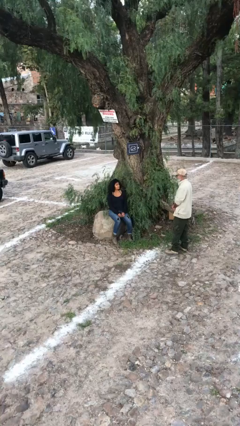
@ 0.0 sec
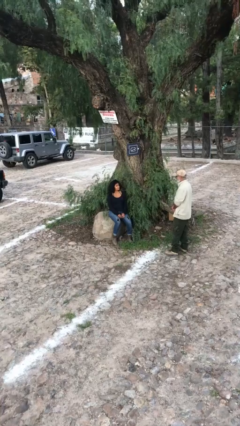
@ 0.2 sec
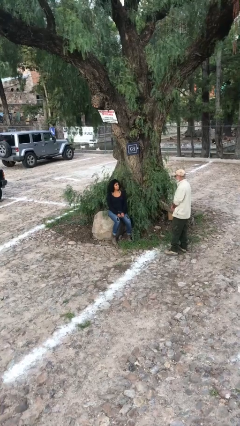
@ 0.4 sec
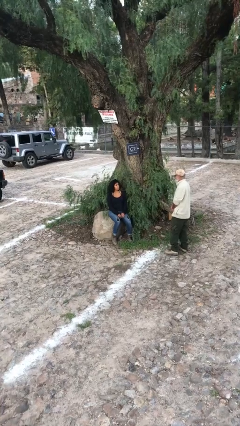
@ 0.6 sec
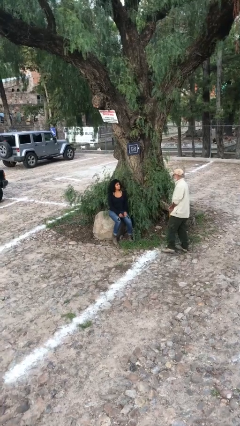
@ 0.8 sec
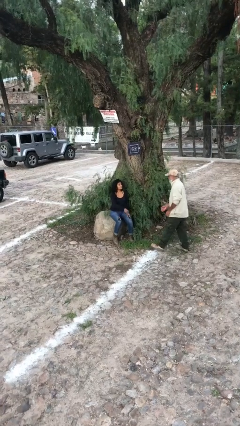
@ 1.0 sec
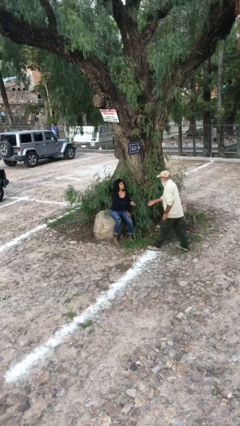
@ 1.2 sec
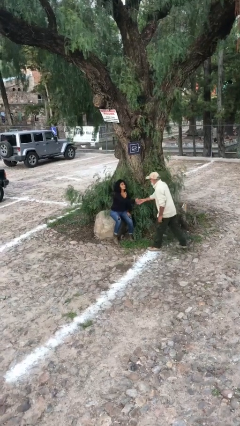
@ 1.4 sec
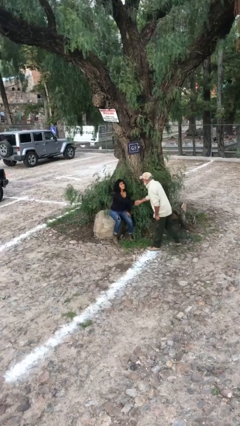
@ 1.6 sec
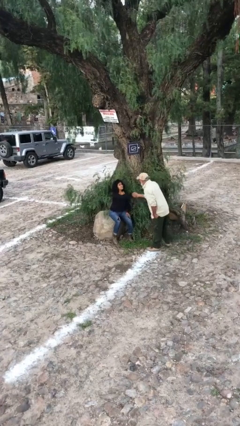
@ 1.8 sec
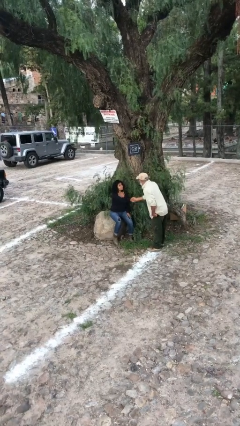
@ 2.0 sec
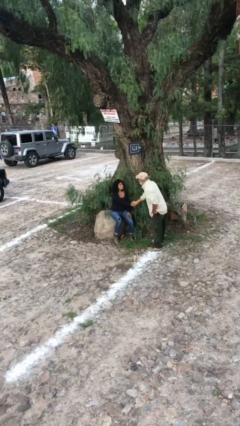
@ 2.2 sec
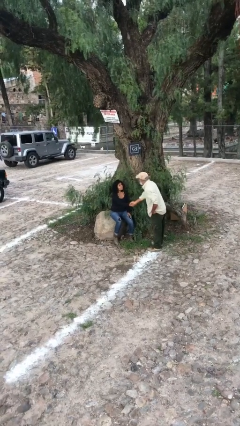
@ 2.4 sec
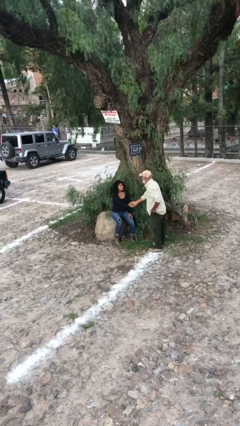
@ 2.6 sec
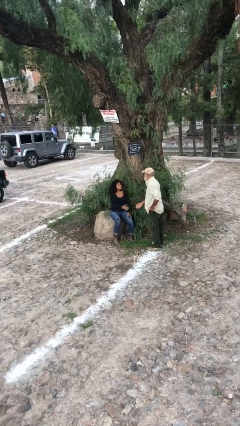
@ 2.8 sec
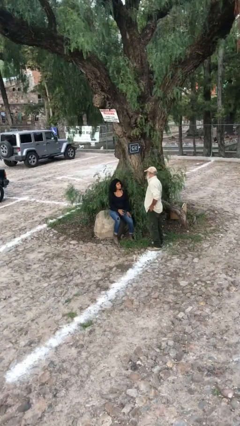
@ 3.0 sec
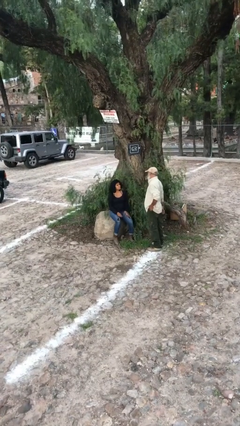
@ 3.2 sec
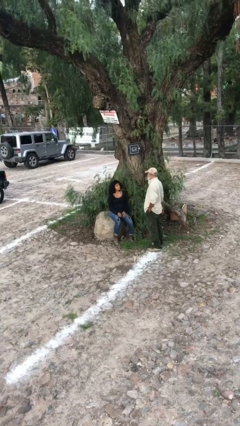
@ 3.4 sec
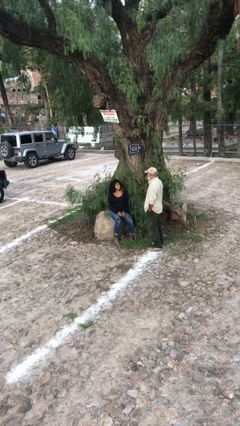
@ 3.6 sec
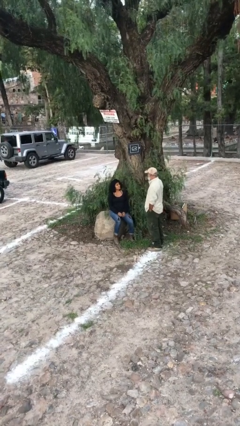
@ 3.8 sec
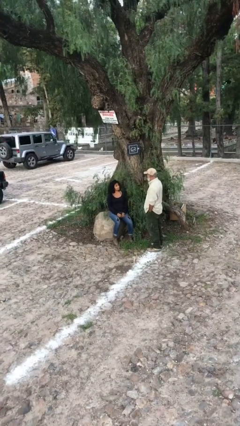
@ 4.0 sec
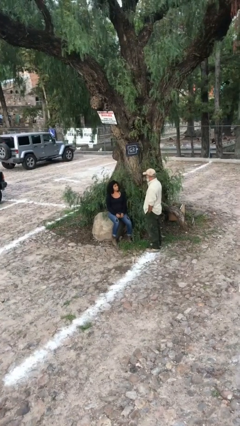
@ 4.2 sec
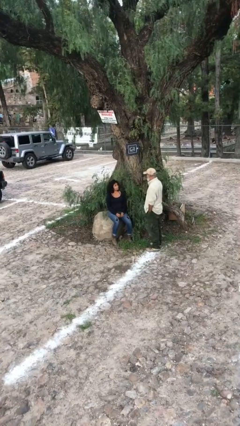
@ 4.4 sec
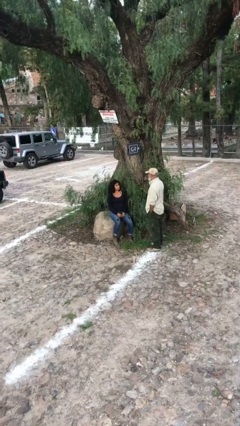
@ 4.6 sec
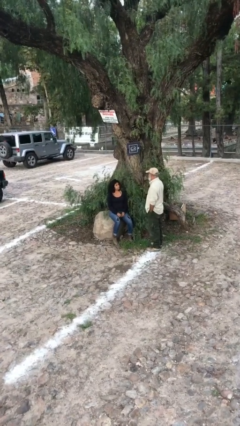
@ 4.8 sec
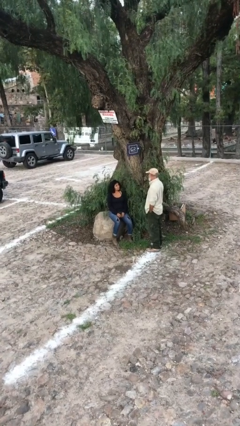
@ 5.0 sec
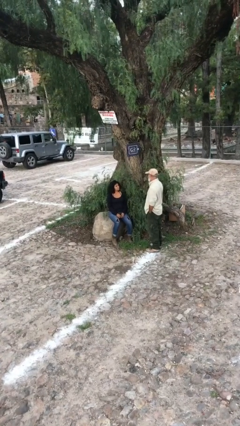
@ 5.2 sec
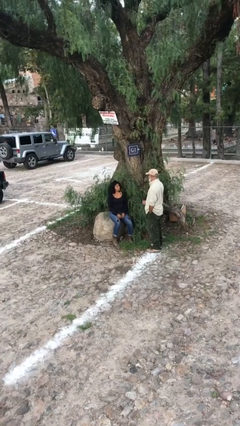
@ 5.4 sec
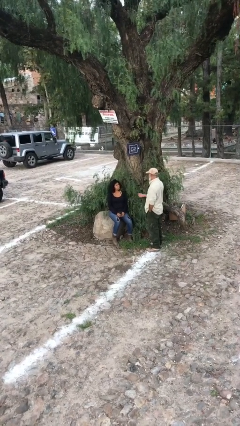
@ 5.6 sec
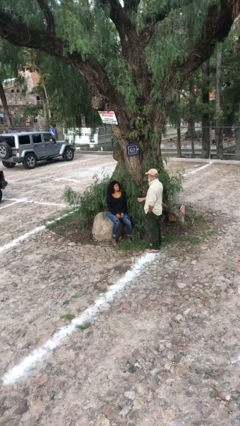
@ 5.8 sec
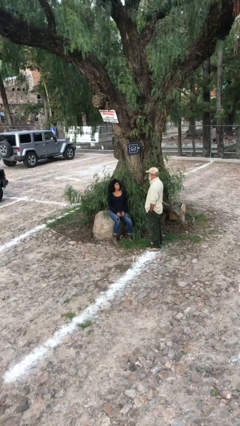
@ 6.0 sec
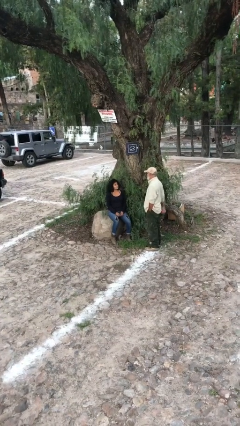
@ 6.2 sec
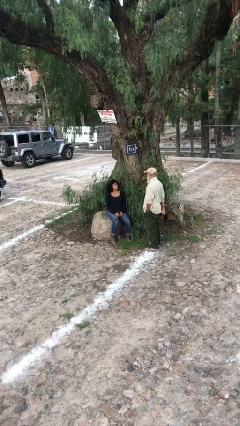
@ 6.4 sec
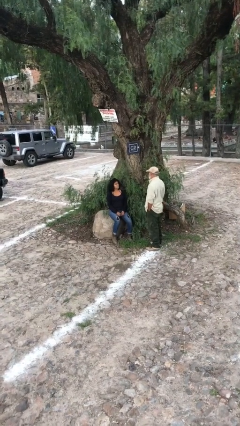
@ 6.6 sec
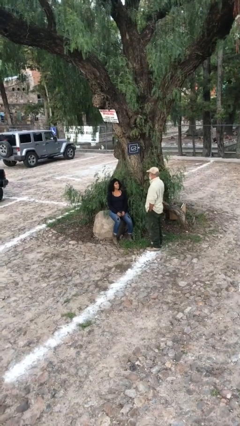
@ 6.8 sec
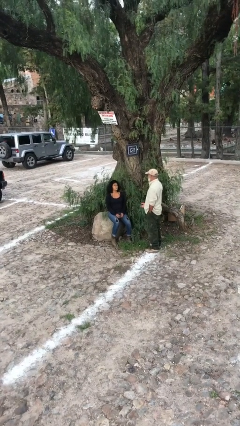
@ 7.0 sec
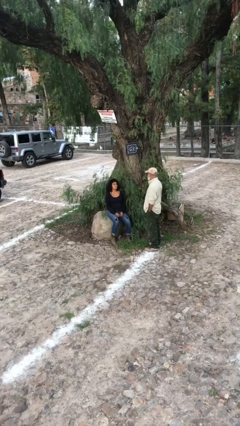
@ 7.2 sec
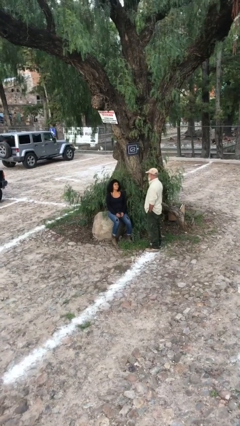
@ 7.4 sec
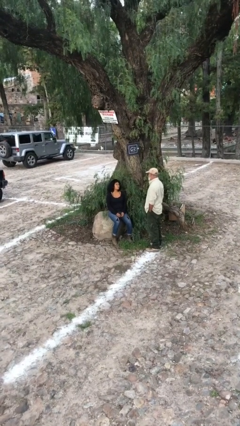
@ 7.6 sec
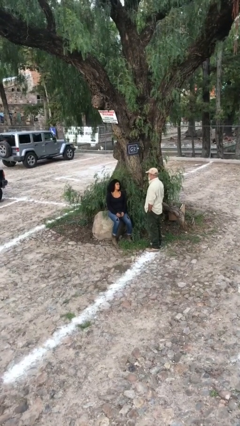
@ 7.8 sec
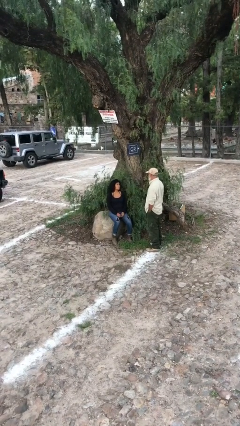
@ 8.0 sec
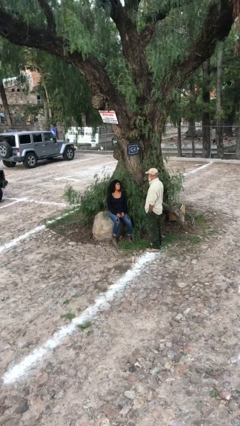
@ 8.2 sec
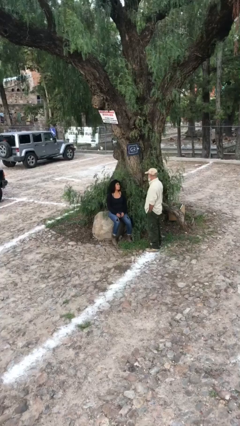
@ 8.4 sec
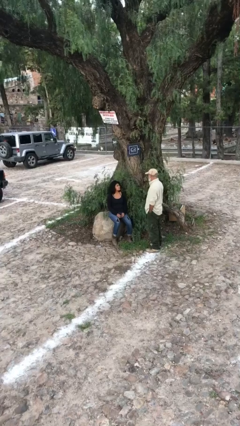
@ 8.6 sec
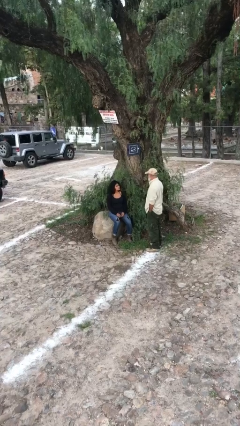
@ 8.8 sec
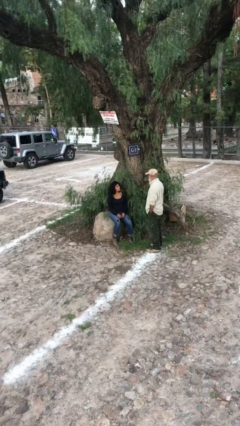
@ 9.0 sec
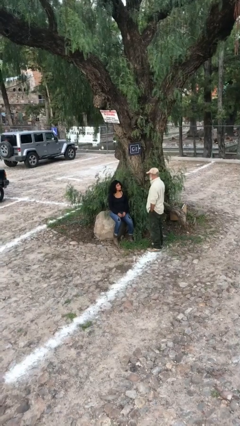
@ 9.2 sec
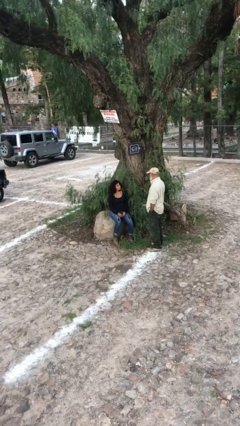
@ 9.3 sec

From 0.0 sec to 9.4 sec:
person shakes hand

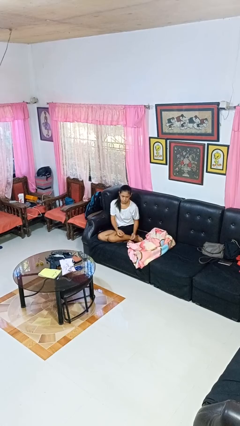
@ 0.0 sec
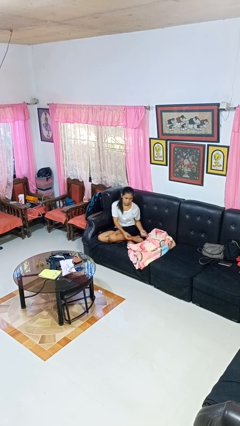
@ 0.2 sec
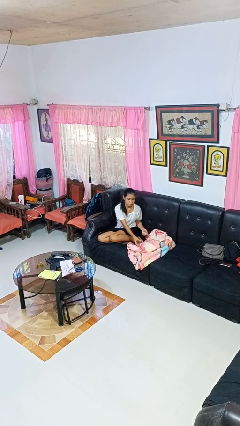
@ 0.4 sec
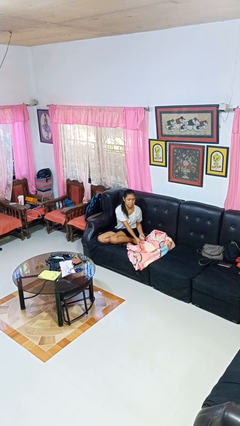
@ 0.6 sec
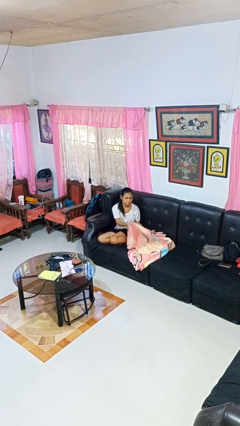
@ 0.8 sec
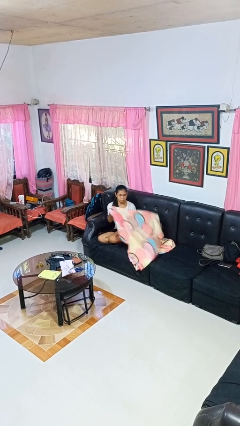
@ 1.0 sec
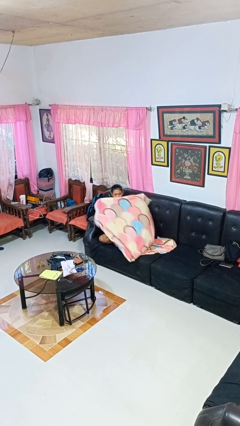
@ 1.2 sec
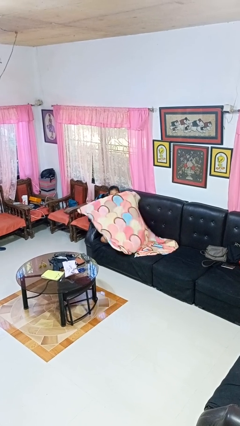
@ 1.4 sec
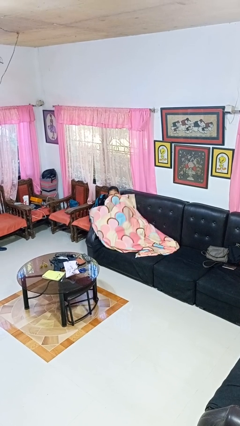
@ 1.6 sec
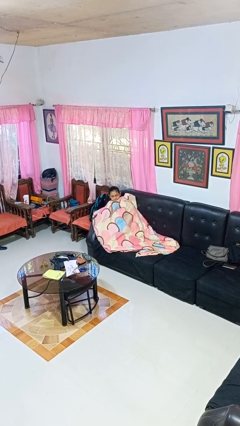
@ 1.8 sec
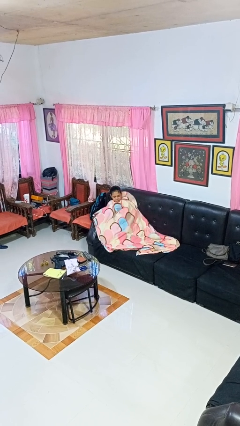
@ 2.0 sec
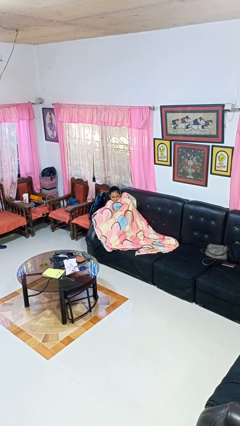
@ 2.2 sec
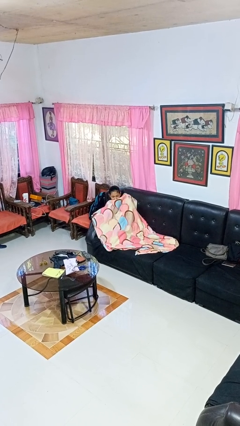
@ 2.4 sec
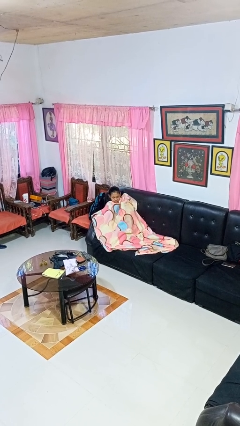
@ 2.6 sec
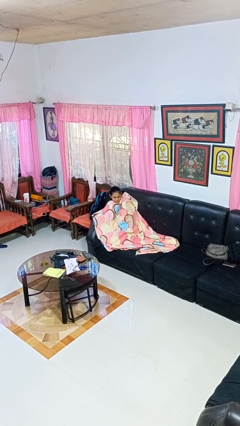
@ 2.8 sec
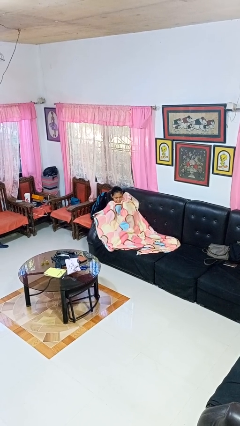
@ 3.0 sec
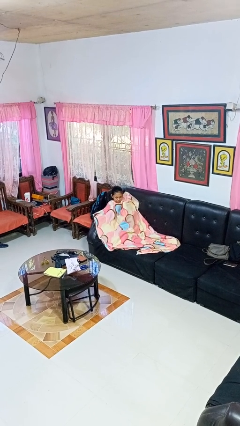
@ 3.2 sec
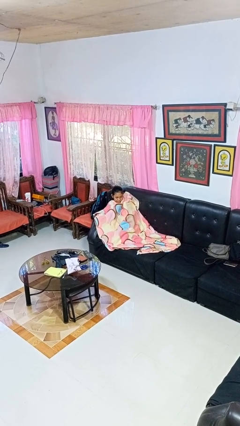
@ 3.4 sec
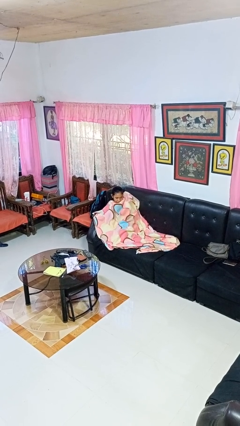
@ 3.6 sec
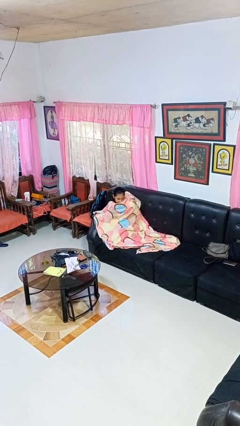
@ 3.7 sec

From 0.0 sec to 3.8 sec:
person covers with blanket

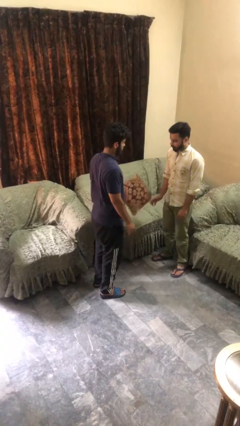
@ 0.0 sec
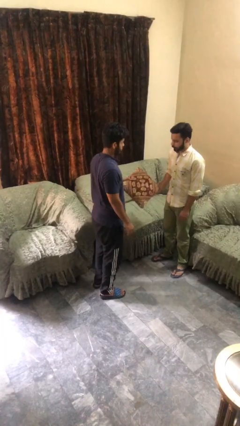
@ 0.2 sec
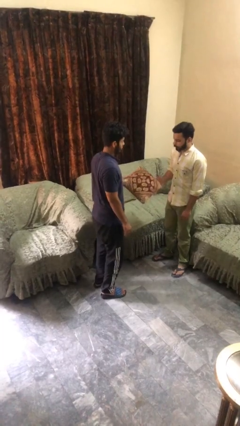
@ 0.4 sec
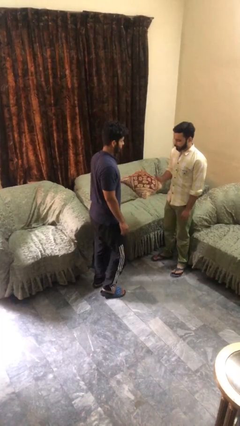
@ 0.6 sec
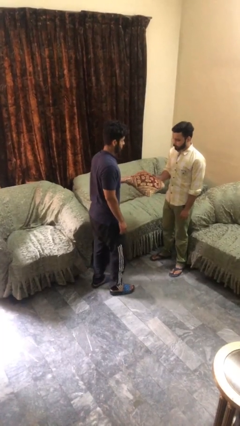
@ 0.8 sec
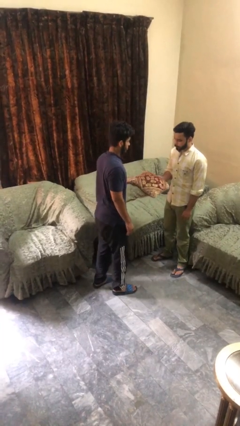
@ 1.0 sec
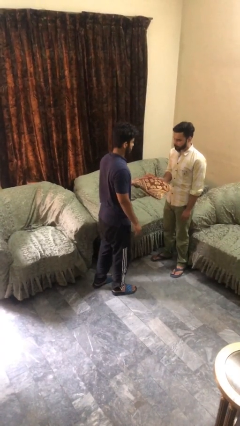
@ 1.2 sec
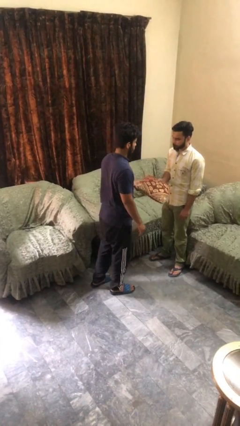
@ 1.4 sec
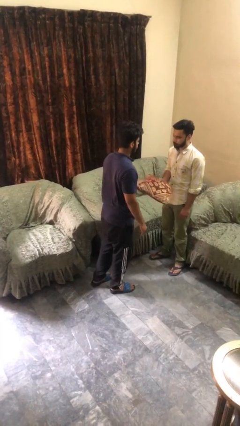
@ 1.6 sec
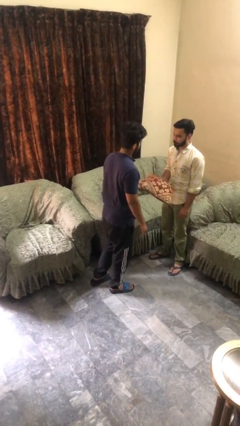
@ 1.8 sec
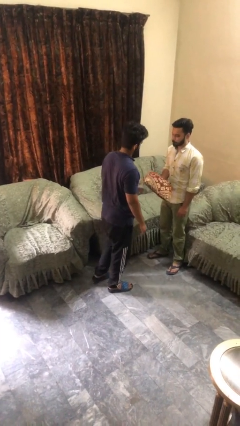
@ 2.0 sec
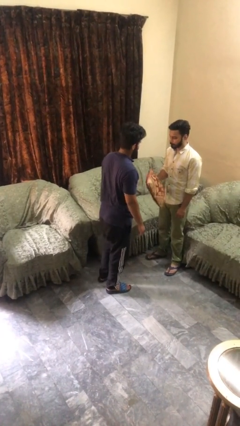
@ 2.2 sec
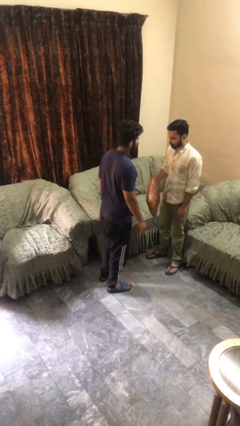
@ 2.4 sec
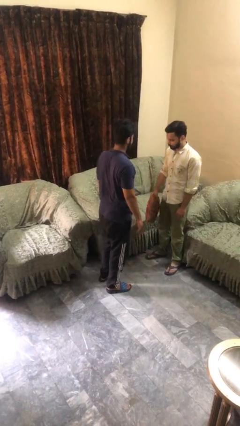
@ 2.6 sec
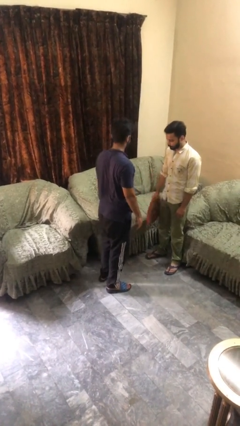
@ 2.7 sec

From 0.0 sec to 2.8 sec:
person transfers object to person

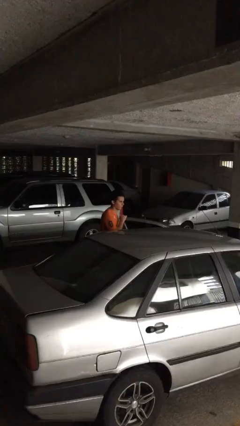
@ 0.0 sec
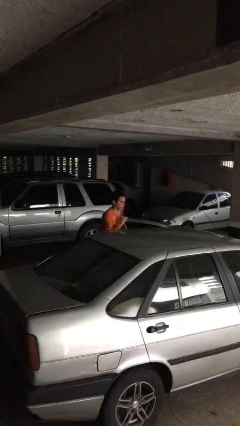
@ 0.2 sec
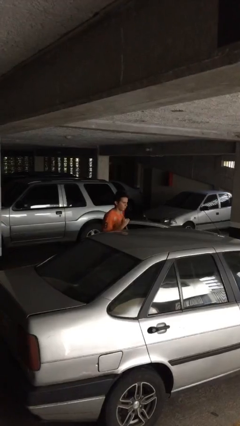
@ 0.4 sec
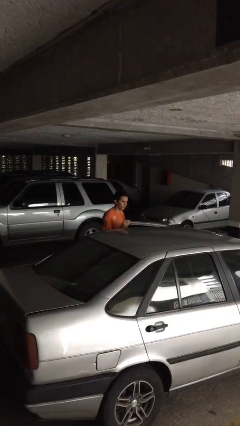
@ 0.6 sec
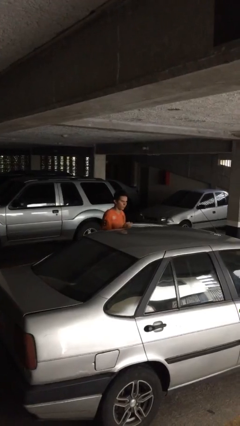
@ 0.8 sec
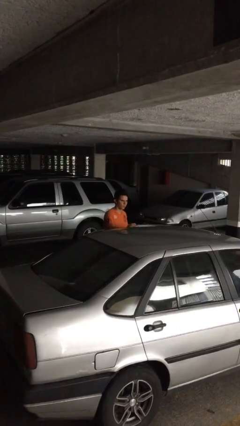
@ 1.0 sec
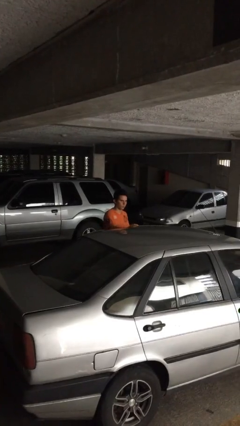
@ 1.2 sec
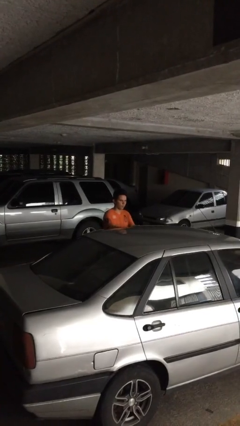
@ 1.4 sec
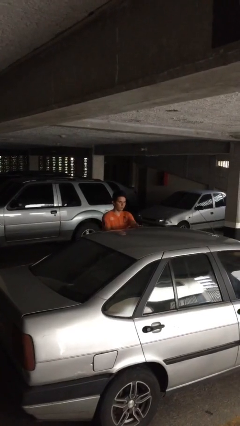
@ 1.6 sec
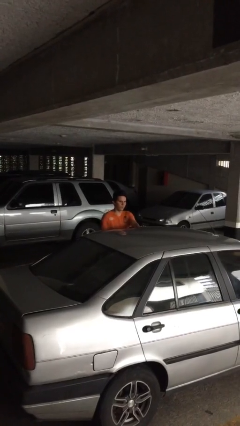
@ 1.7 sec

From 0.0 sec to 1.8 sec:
person closes car door
